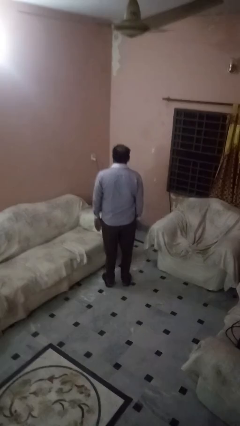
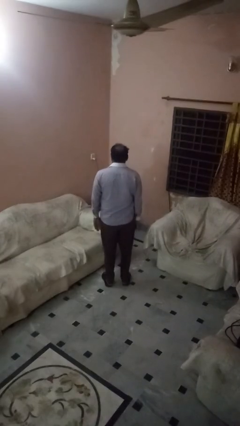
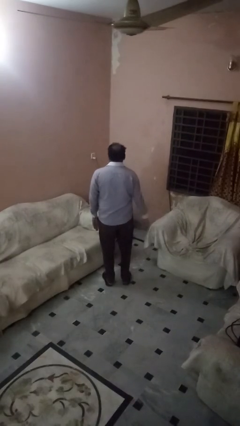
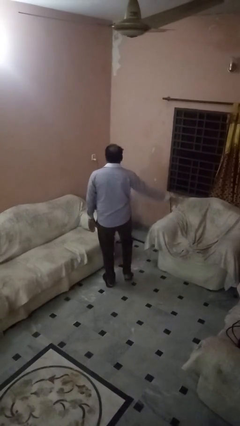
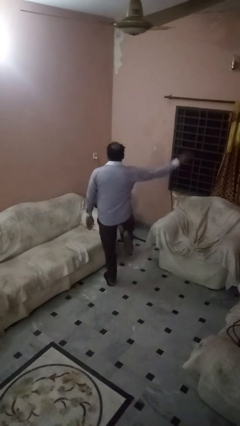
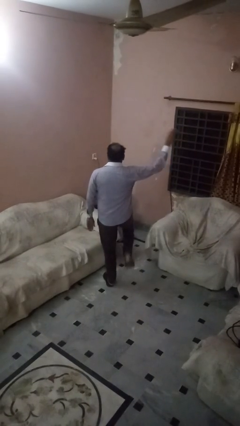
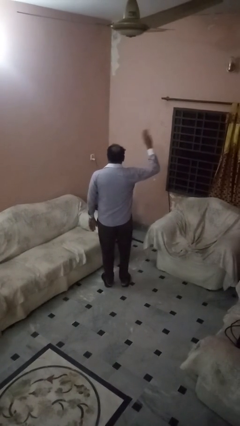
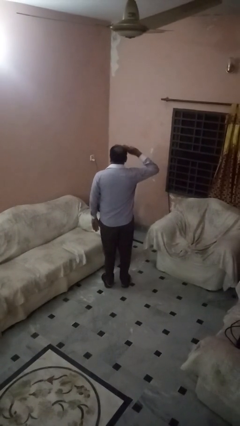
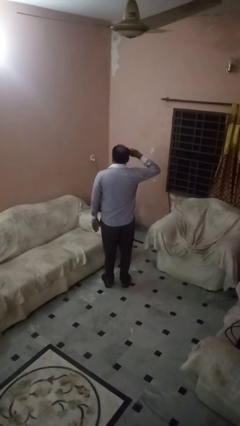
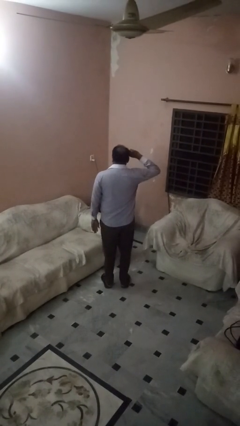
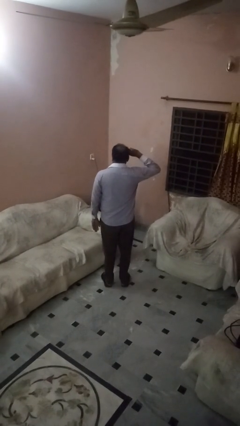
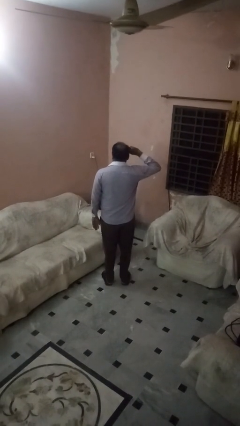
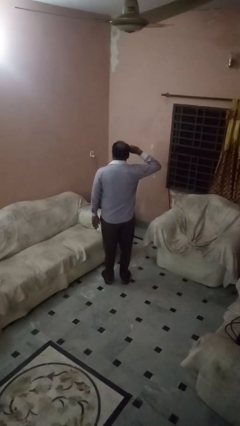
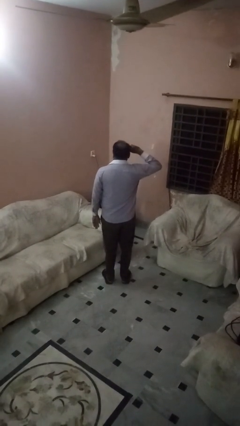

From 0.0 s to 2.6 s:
person salutes

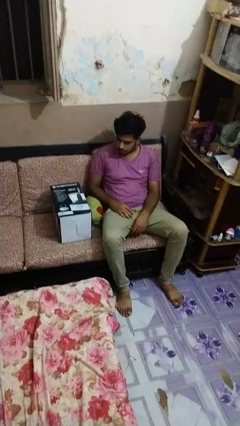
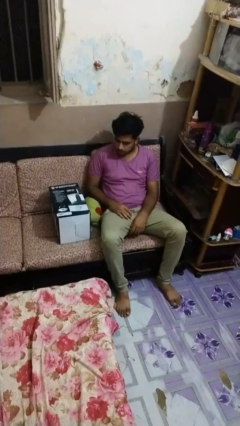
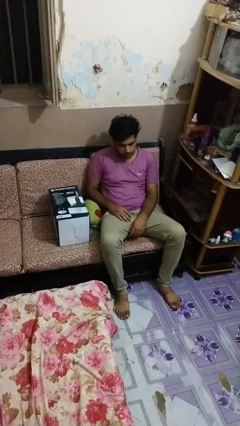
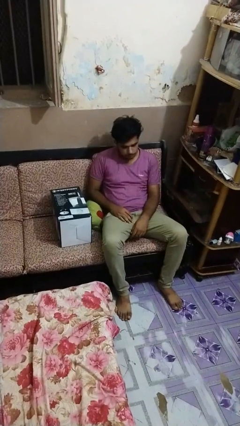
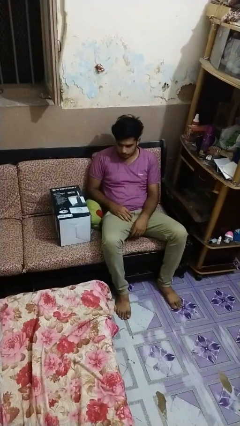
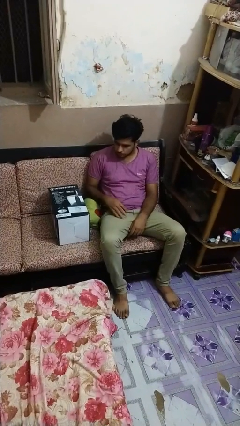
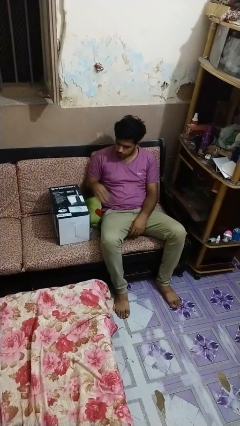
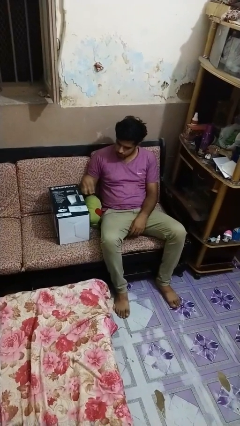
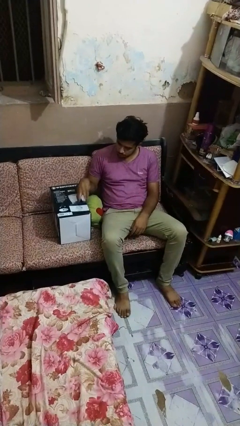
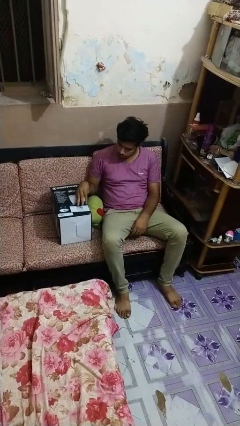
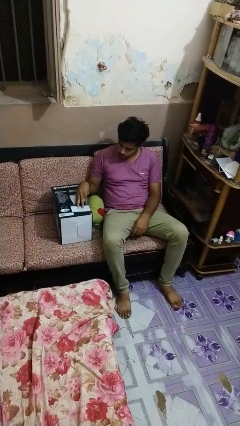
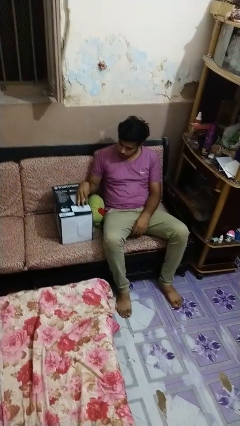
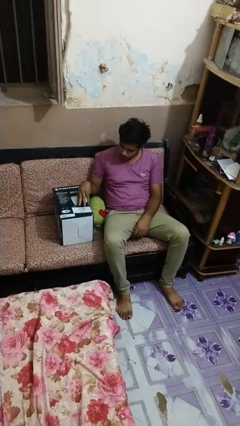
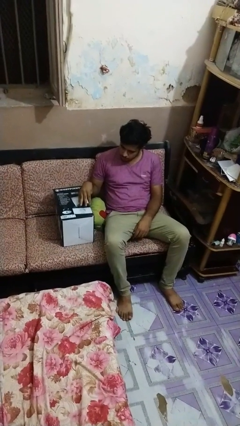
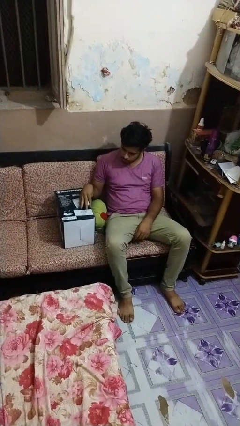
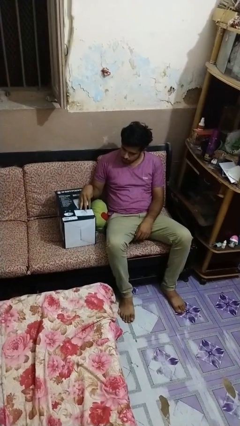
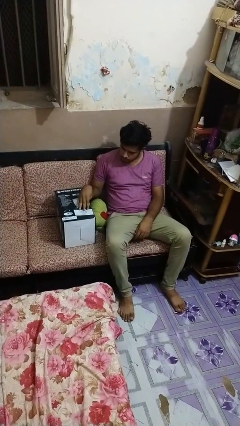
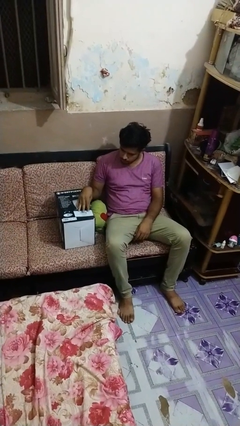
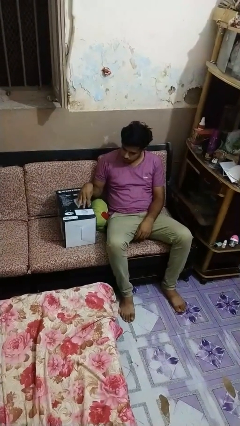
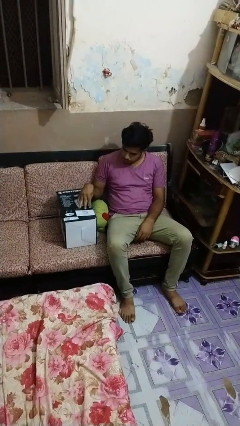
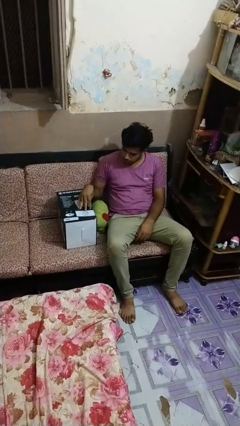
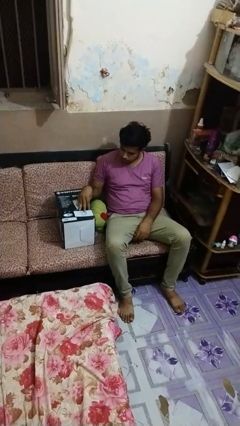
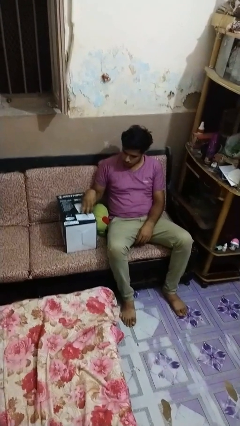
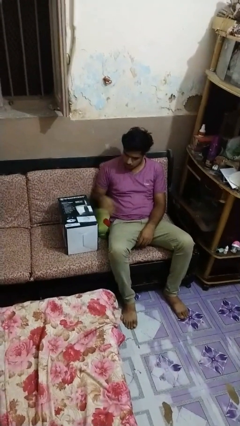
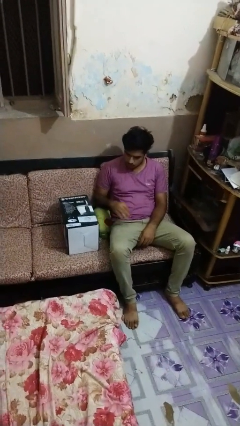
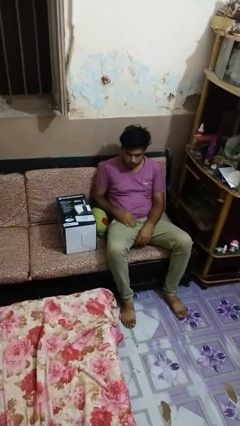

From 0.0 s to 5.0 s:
person taps object with finger

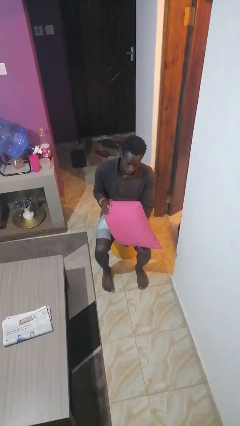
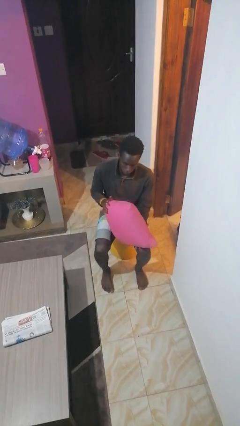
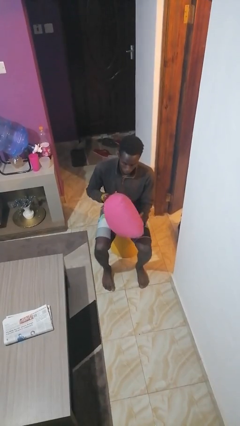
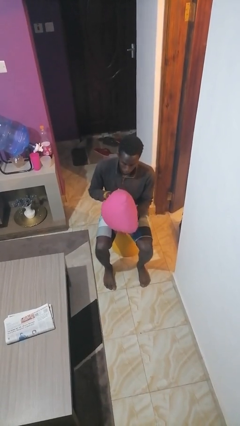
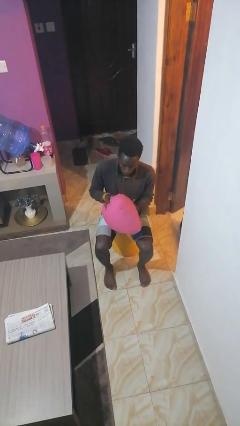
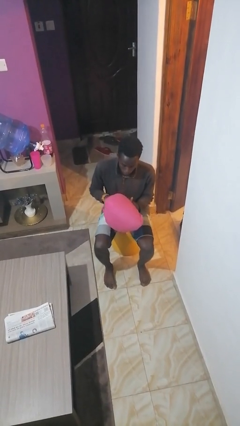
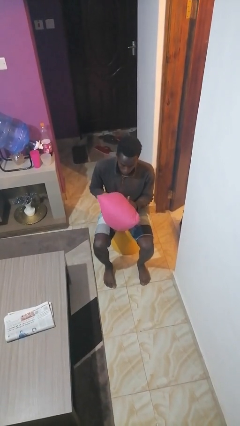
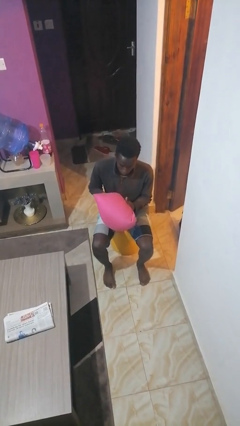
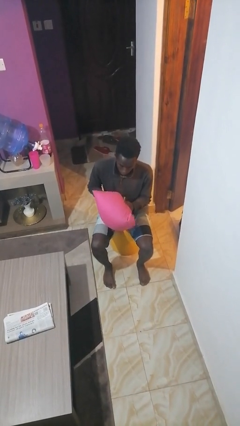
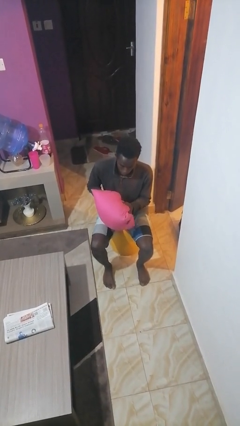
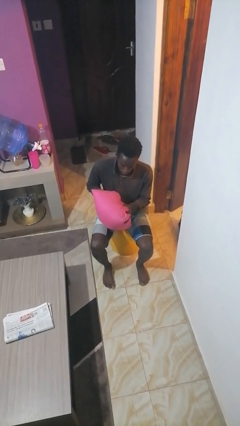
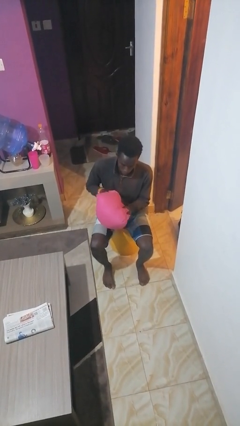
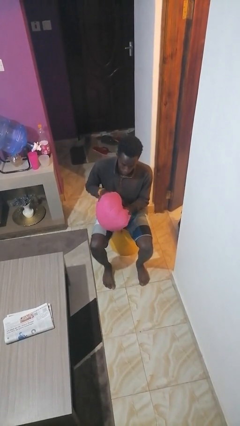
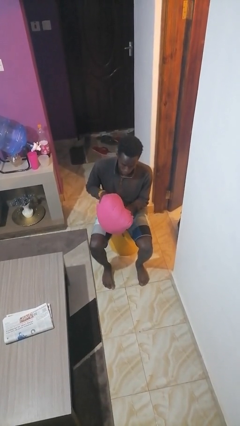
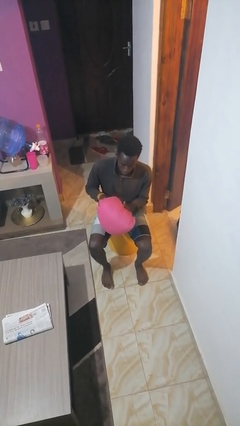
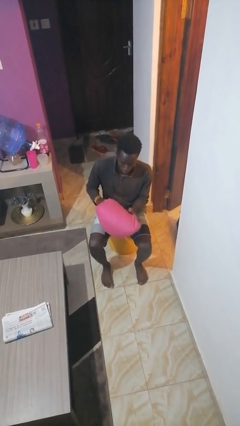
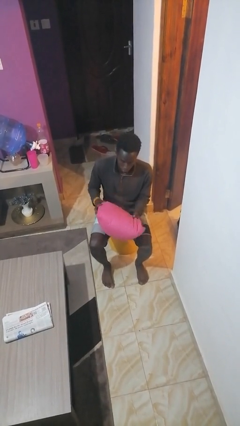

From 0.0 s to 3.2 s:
person squeezes object

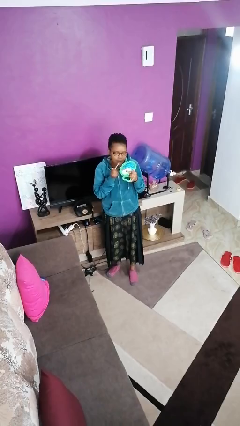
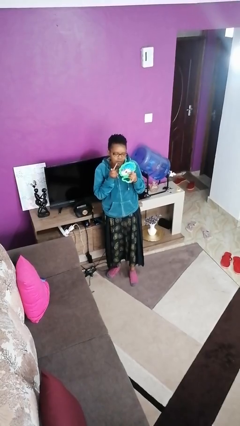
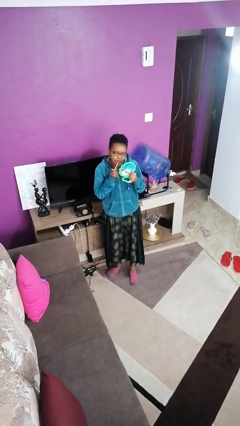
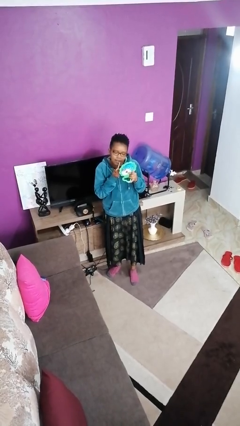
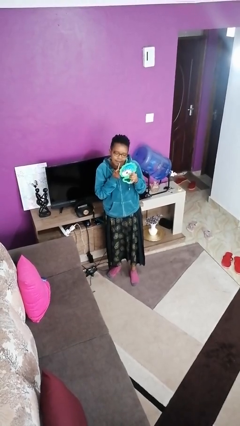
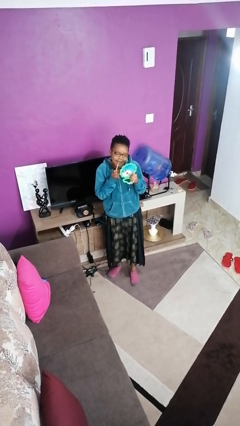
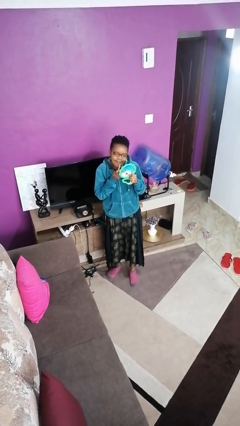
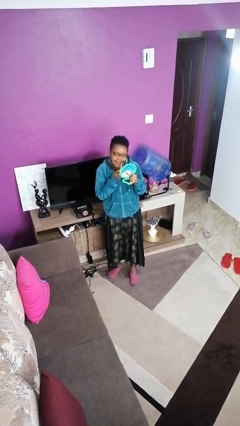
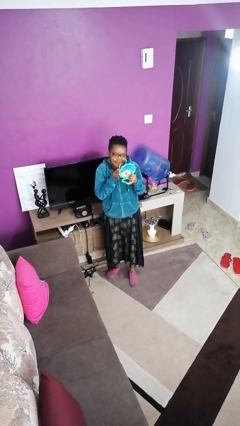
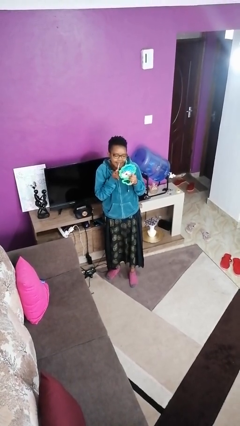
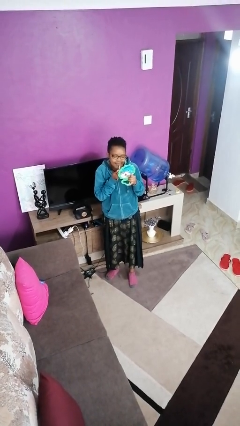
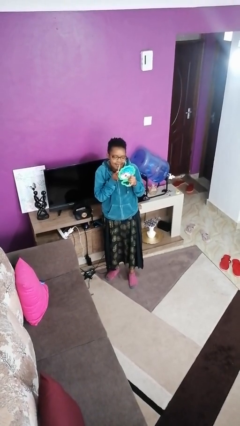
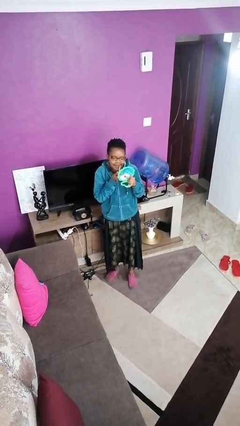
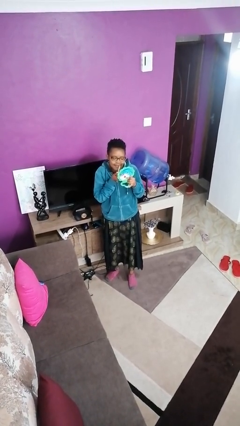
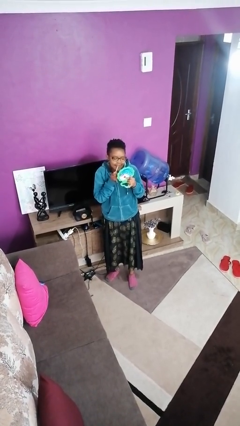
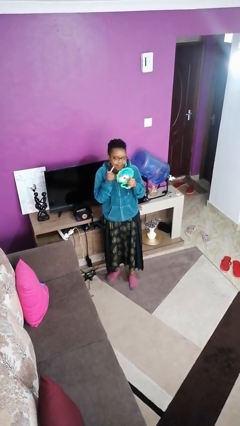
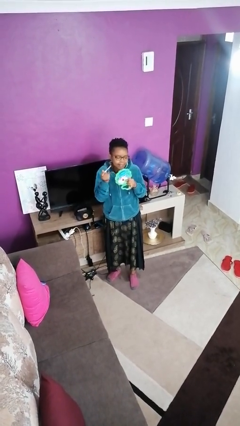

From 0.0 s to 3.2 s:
person applies lip makeup

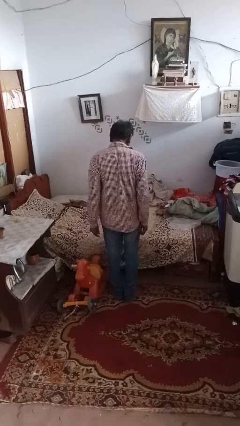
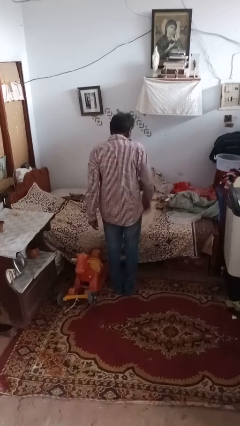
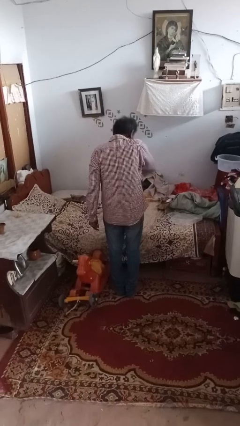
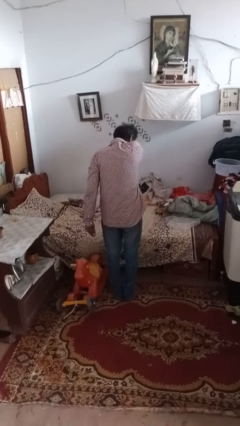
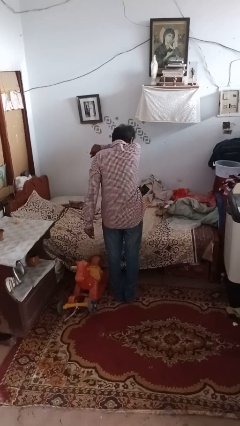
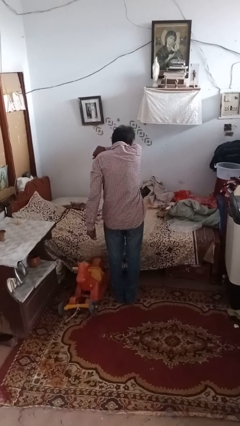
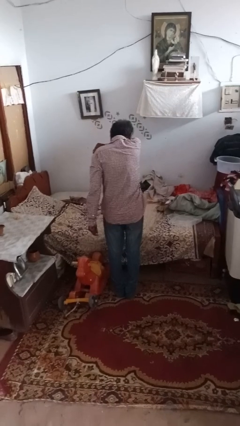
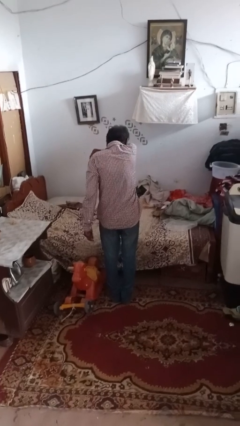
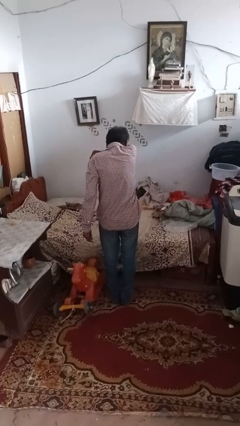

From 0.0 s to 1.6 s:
person sneezes into hand

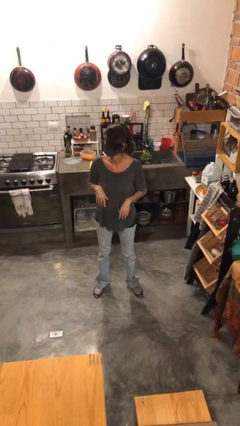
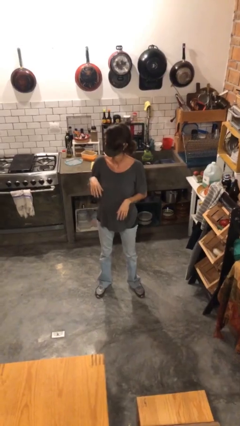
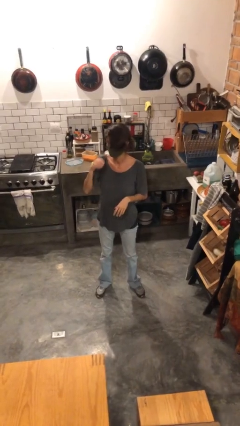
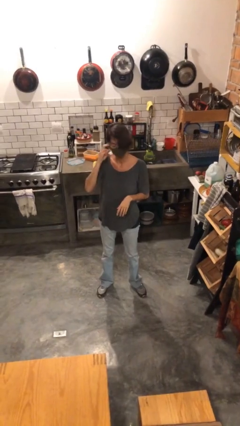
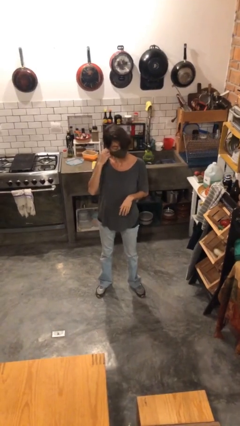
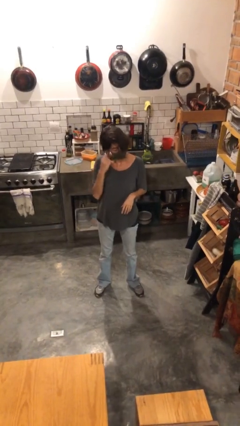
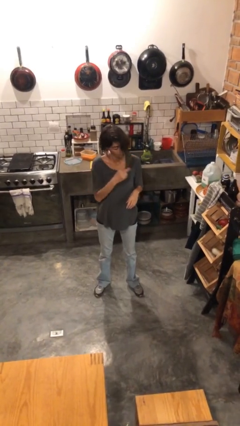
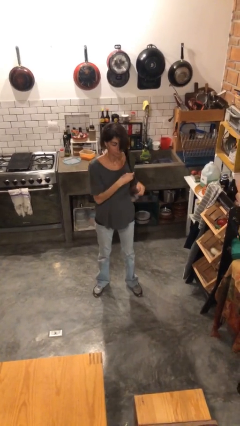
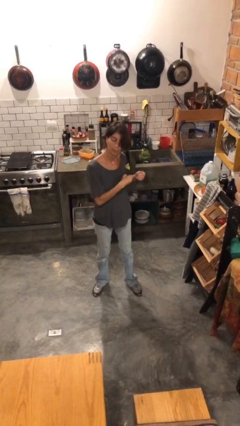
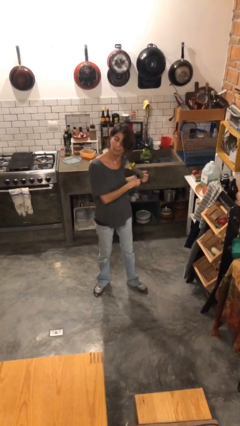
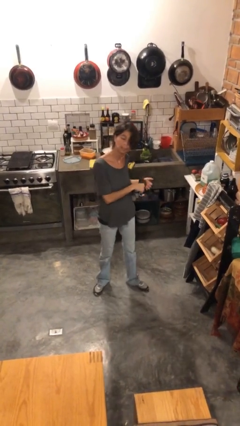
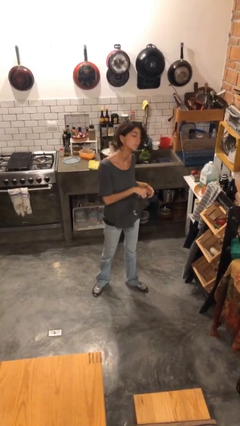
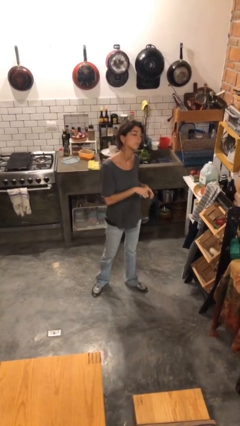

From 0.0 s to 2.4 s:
person takes off facemask
